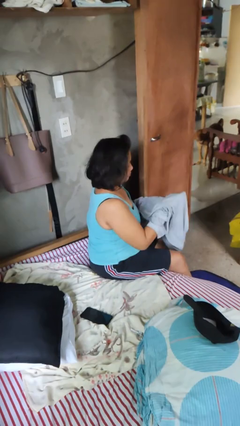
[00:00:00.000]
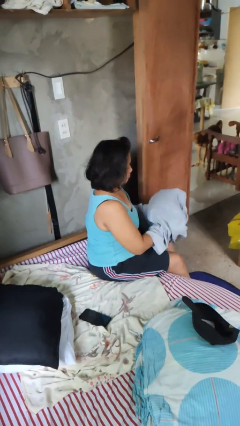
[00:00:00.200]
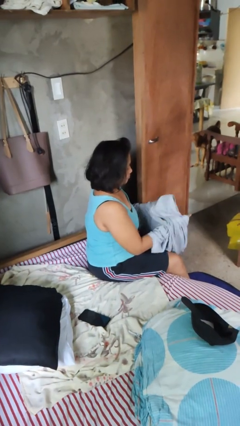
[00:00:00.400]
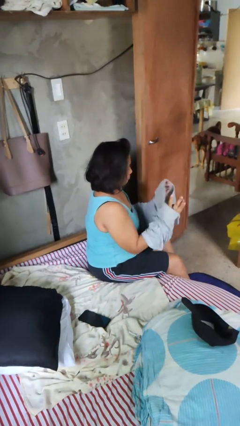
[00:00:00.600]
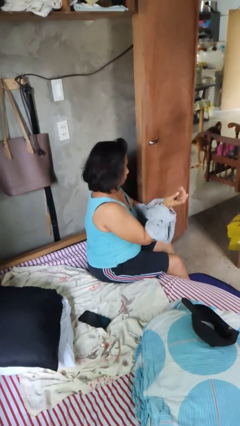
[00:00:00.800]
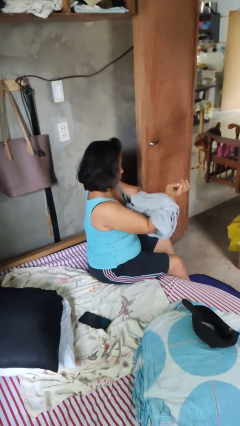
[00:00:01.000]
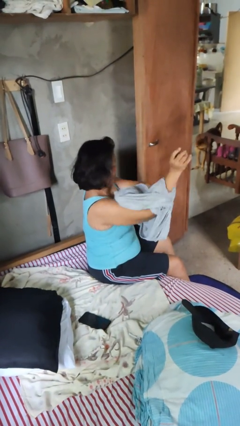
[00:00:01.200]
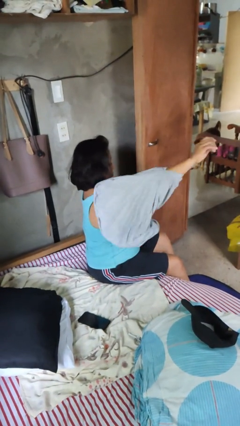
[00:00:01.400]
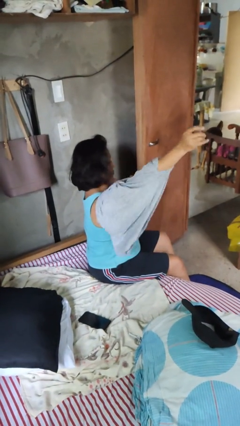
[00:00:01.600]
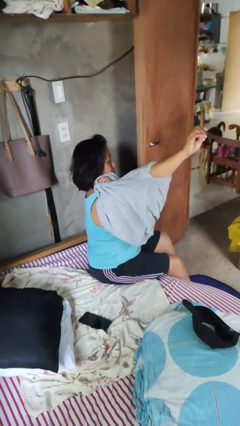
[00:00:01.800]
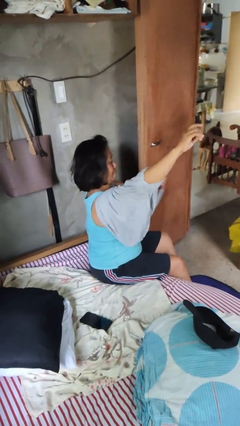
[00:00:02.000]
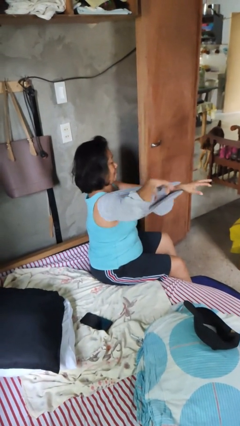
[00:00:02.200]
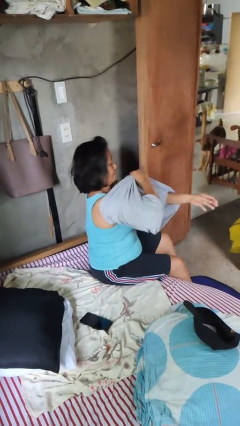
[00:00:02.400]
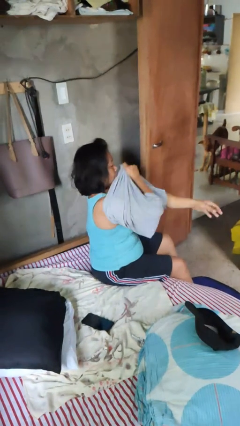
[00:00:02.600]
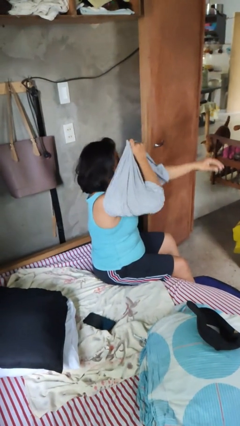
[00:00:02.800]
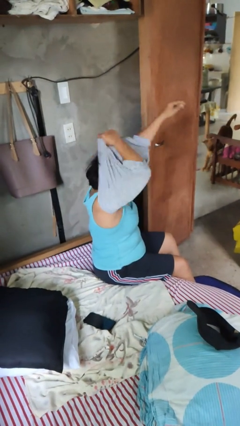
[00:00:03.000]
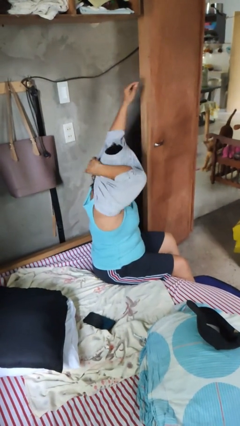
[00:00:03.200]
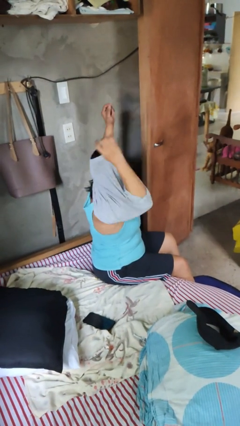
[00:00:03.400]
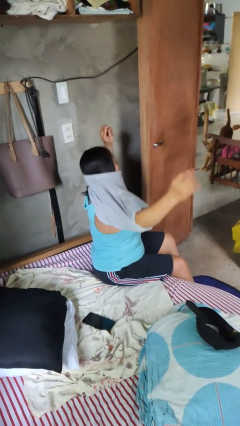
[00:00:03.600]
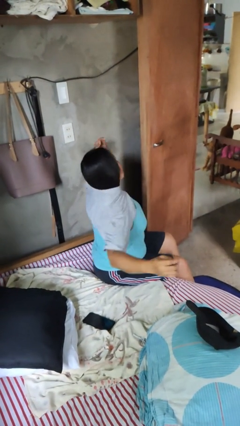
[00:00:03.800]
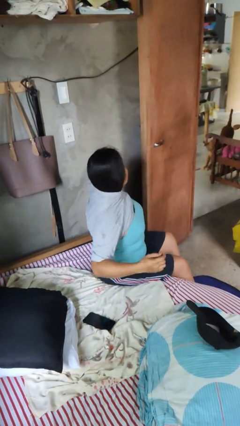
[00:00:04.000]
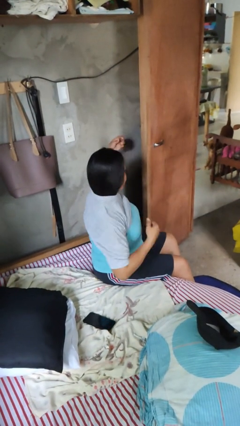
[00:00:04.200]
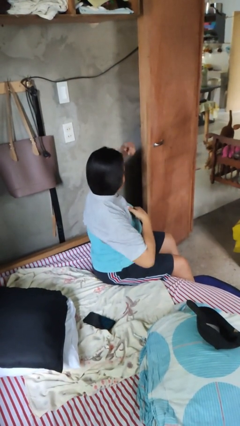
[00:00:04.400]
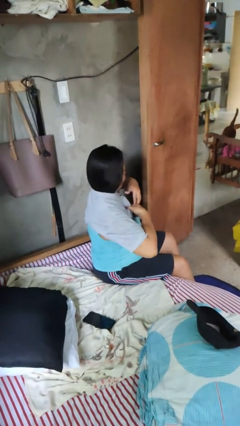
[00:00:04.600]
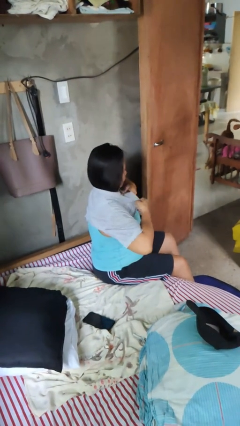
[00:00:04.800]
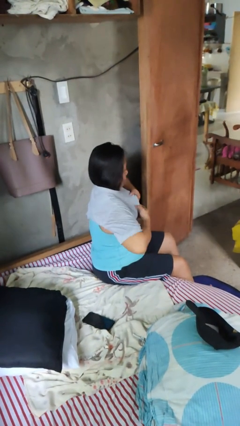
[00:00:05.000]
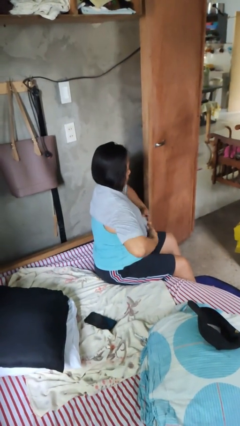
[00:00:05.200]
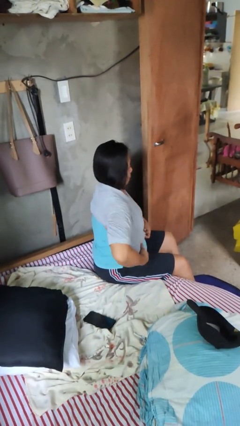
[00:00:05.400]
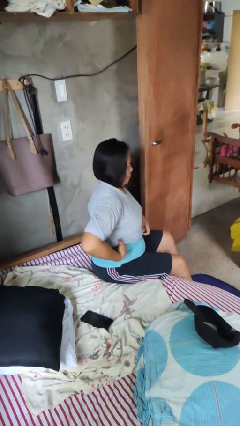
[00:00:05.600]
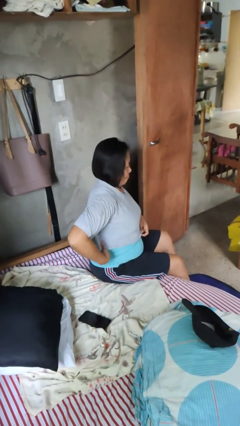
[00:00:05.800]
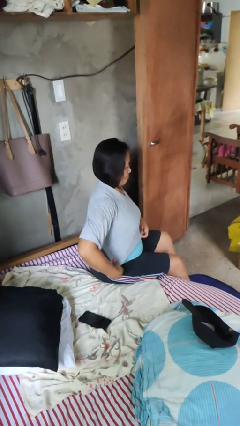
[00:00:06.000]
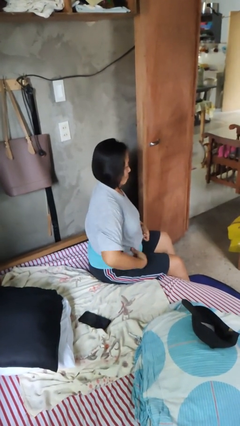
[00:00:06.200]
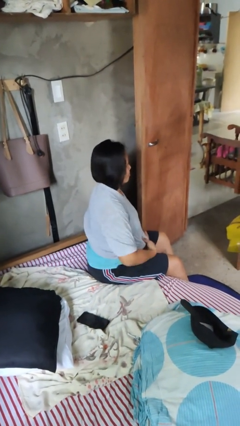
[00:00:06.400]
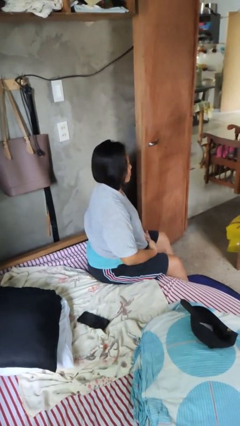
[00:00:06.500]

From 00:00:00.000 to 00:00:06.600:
person puts on shirt

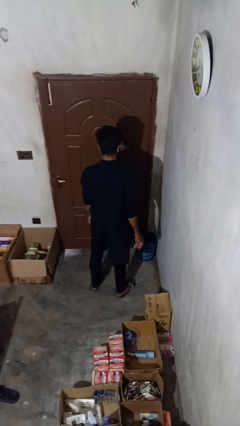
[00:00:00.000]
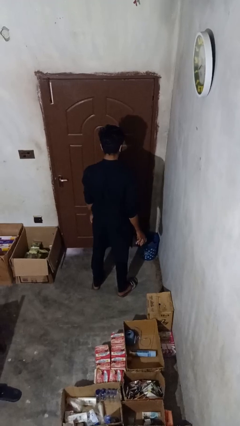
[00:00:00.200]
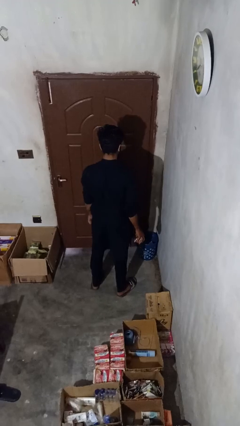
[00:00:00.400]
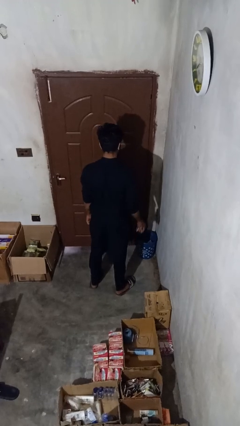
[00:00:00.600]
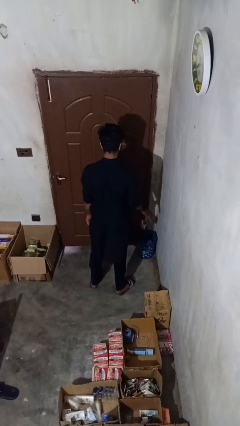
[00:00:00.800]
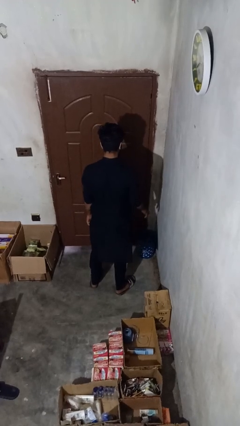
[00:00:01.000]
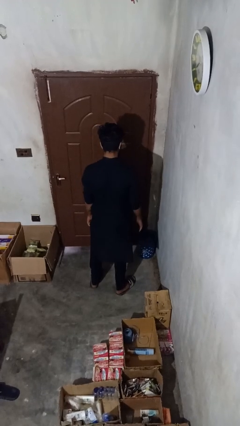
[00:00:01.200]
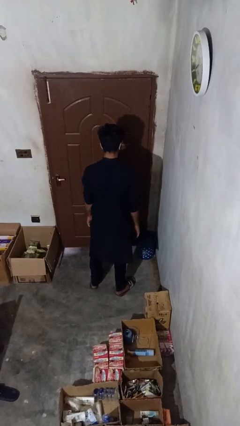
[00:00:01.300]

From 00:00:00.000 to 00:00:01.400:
person discards trash

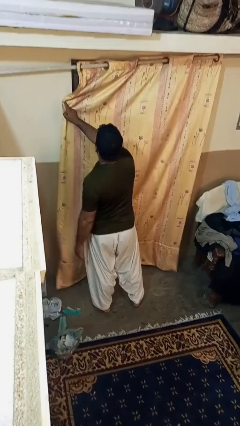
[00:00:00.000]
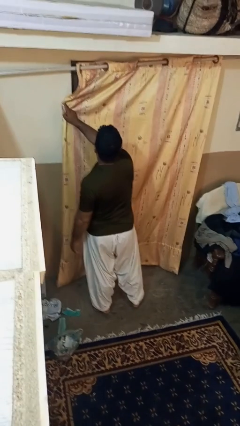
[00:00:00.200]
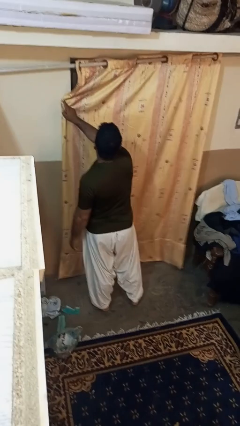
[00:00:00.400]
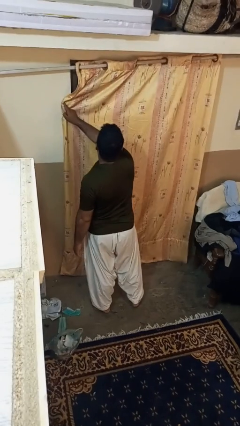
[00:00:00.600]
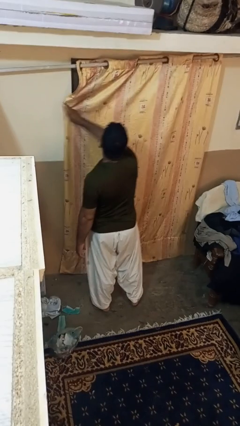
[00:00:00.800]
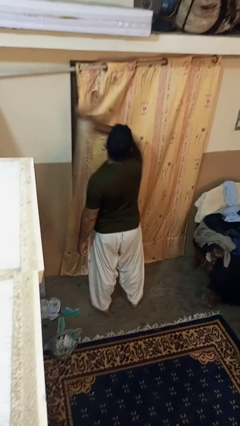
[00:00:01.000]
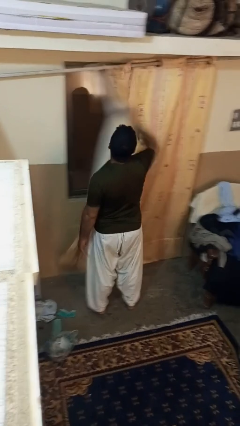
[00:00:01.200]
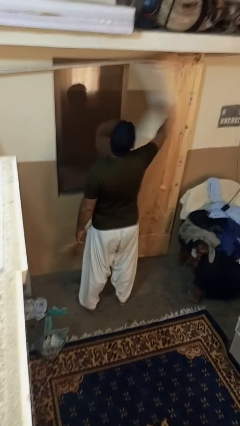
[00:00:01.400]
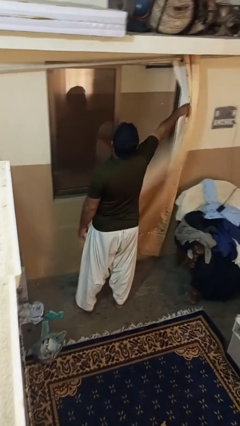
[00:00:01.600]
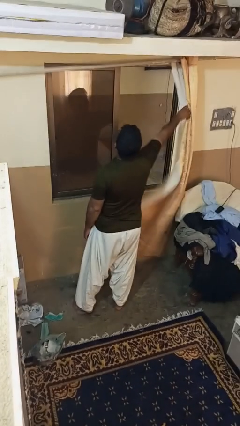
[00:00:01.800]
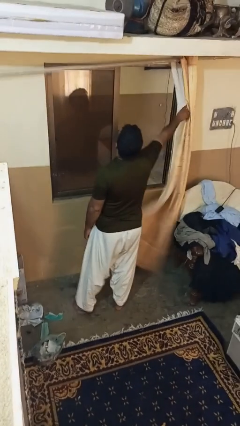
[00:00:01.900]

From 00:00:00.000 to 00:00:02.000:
person opens curtains

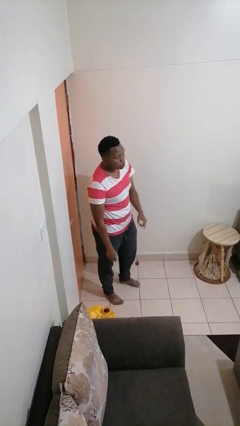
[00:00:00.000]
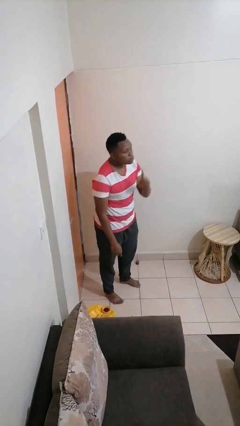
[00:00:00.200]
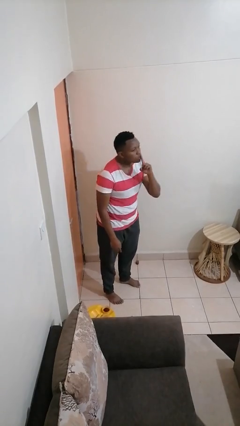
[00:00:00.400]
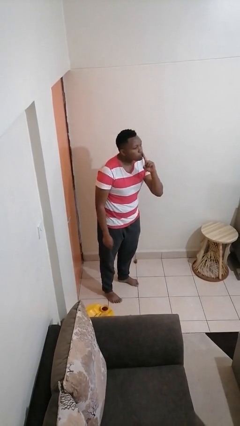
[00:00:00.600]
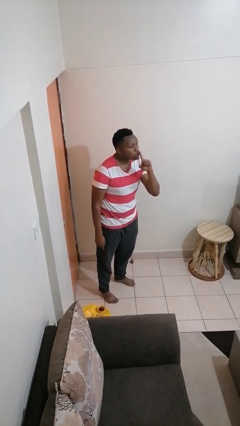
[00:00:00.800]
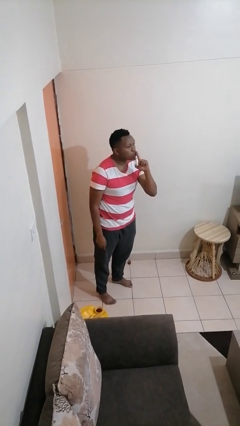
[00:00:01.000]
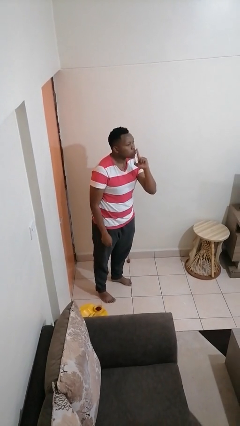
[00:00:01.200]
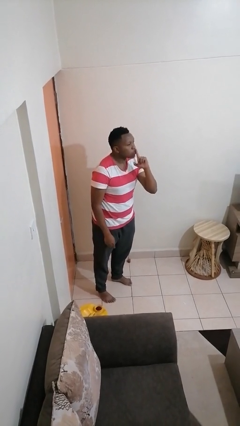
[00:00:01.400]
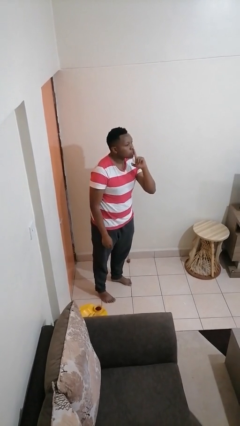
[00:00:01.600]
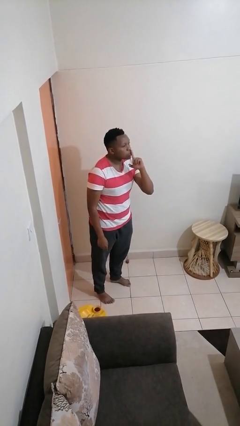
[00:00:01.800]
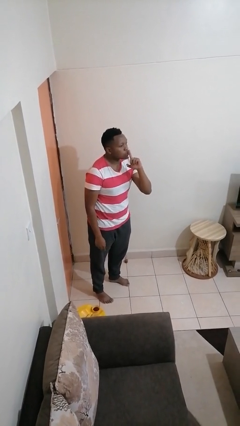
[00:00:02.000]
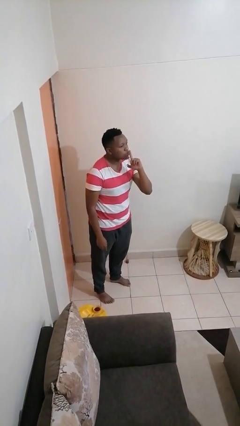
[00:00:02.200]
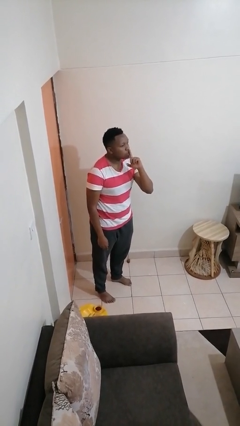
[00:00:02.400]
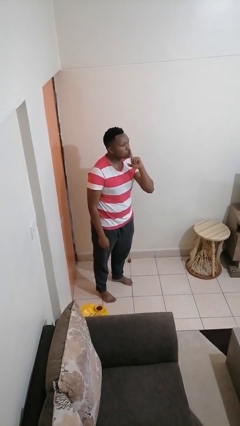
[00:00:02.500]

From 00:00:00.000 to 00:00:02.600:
person gestures be quiet

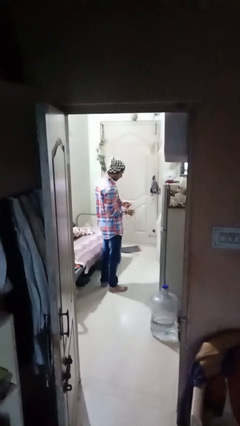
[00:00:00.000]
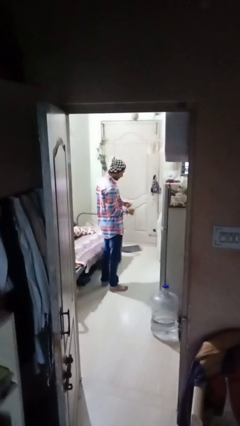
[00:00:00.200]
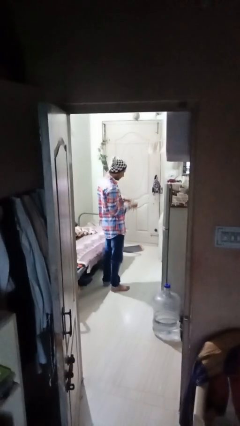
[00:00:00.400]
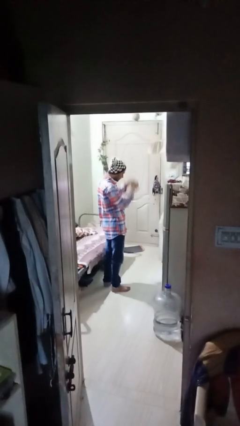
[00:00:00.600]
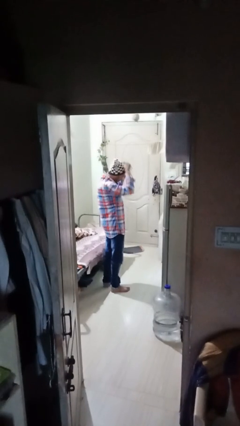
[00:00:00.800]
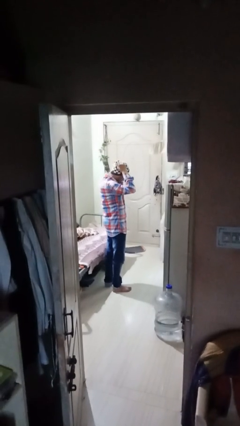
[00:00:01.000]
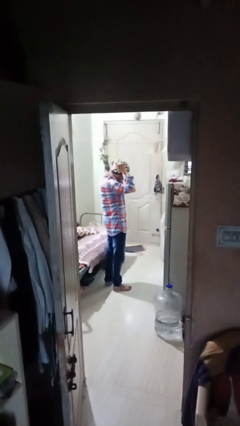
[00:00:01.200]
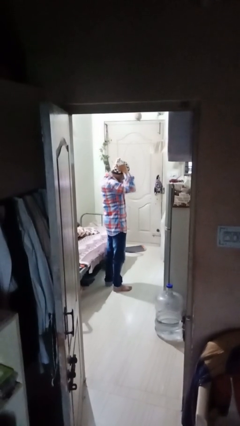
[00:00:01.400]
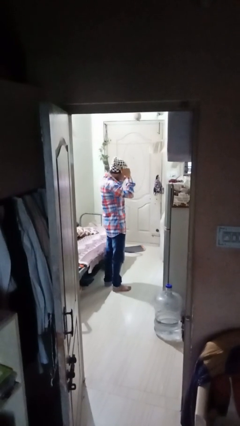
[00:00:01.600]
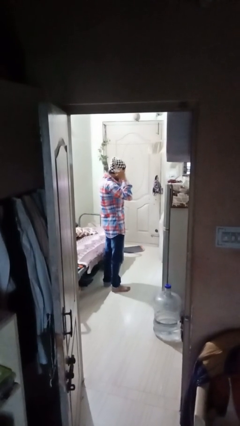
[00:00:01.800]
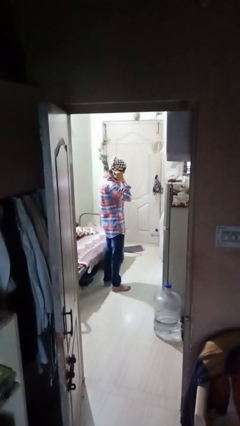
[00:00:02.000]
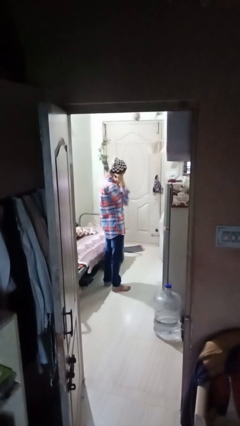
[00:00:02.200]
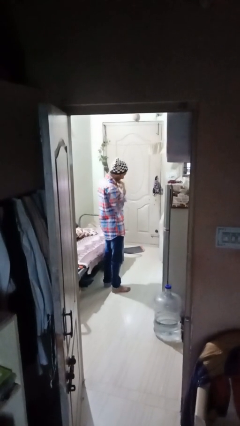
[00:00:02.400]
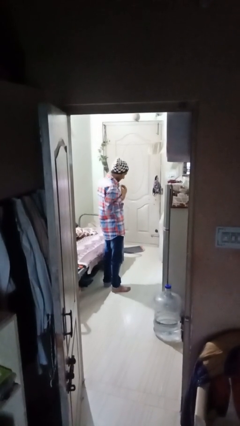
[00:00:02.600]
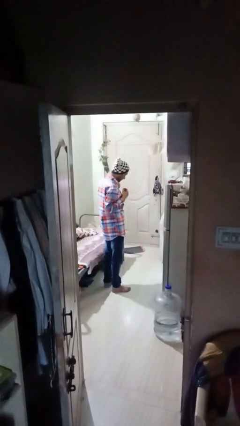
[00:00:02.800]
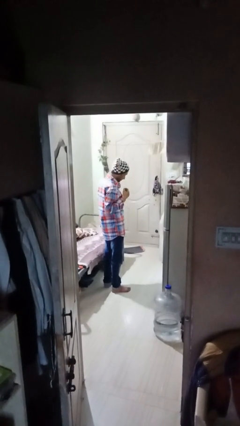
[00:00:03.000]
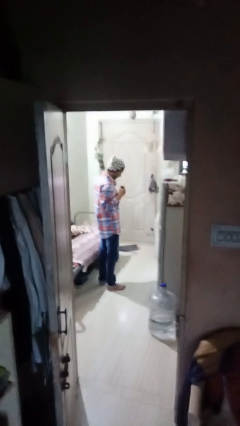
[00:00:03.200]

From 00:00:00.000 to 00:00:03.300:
person puts on necklace

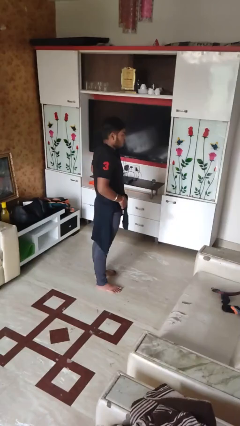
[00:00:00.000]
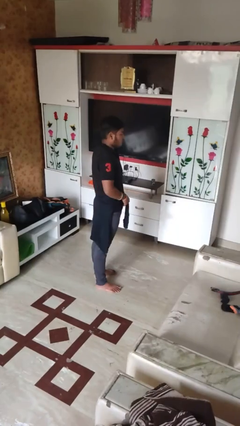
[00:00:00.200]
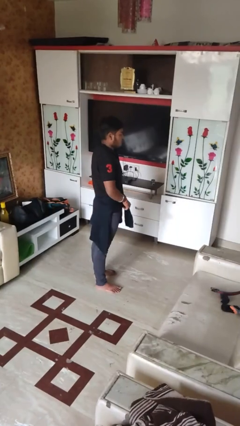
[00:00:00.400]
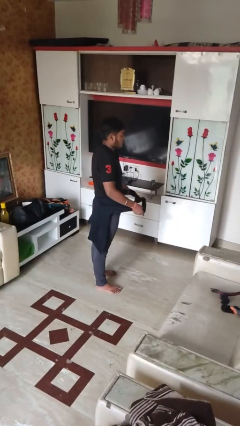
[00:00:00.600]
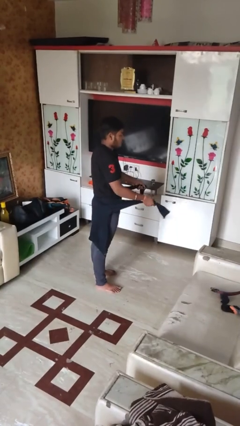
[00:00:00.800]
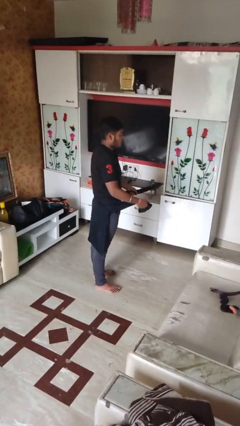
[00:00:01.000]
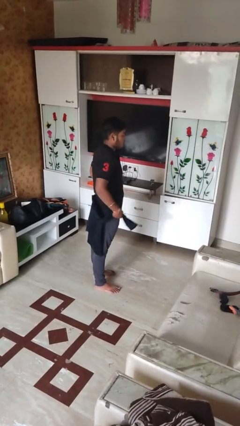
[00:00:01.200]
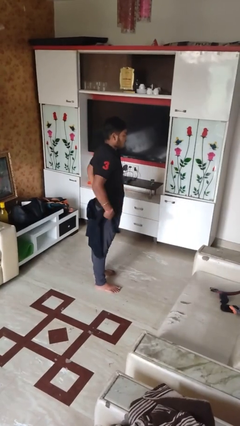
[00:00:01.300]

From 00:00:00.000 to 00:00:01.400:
person unties jacket around waist
